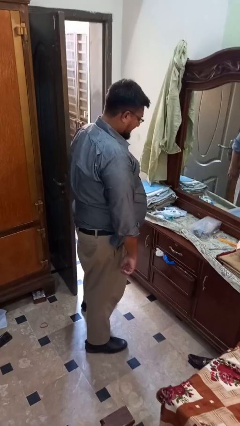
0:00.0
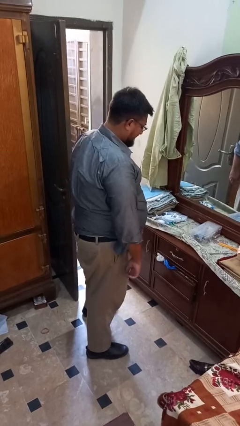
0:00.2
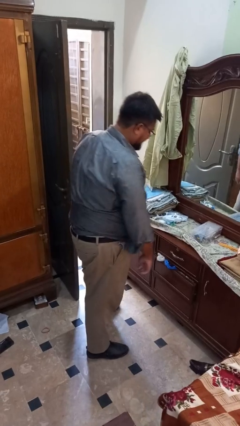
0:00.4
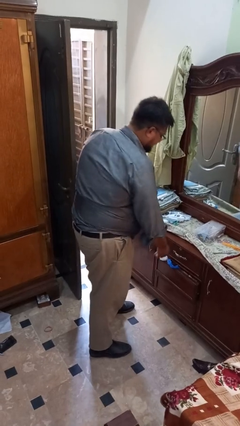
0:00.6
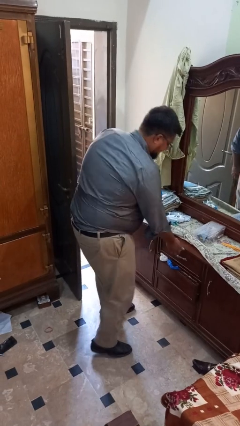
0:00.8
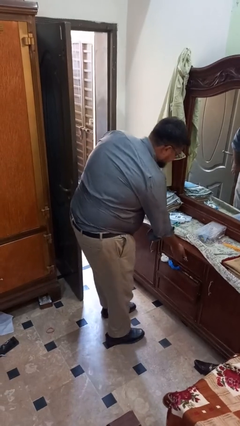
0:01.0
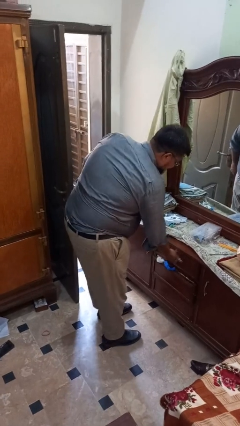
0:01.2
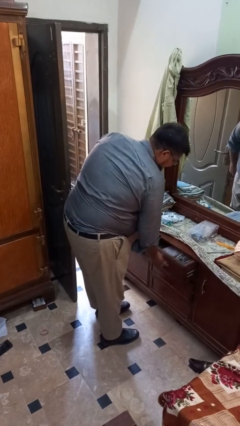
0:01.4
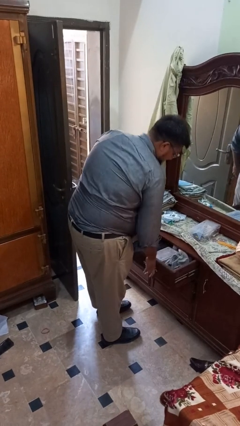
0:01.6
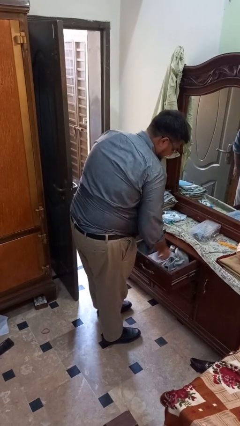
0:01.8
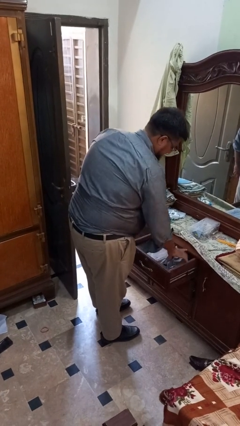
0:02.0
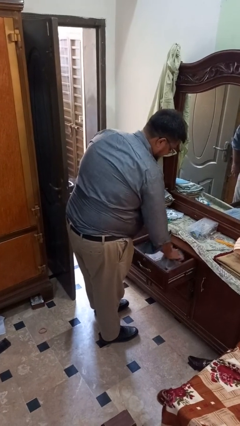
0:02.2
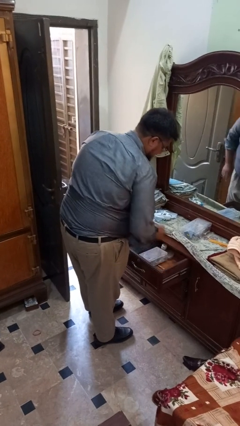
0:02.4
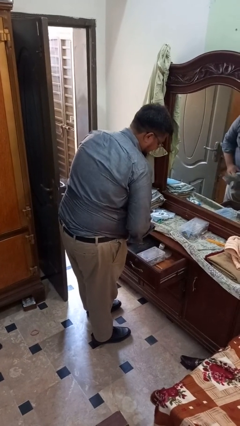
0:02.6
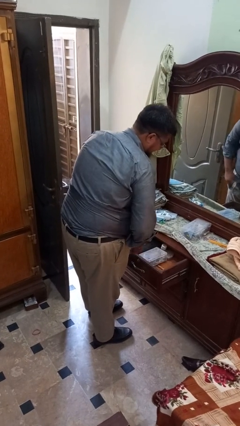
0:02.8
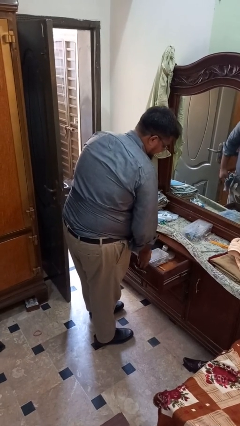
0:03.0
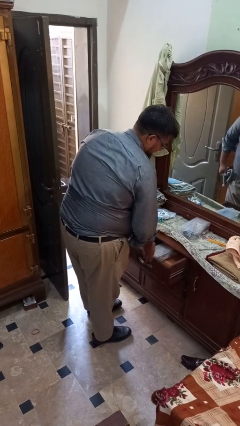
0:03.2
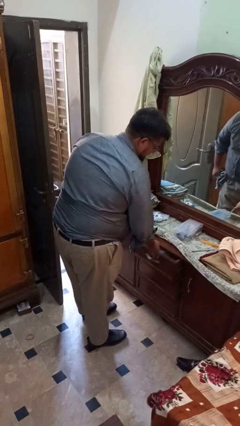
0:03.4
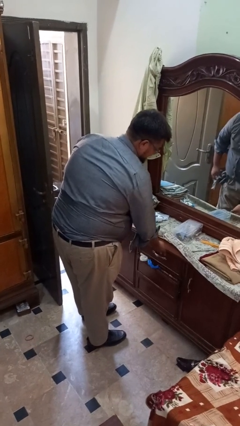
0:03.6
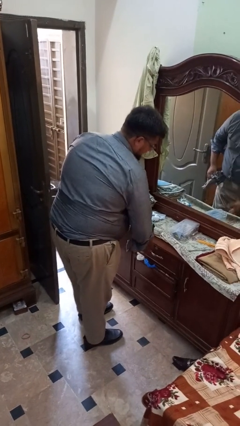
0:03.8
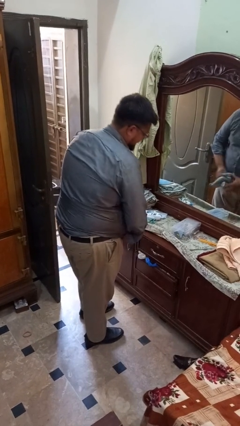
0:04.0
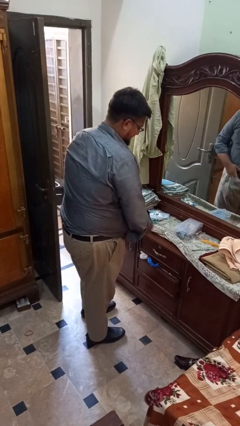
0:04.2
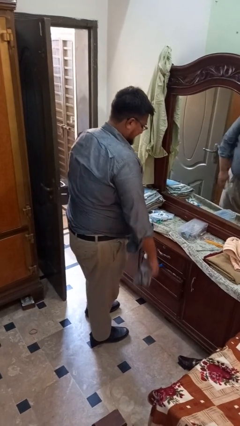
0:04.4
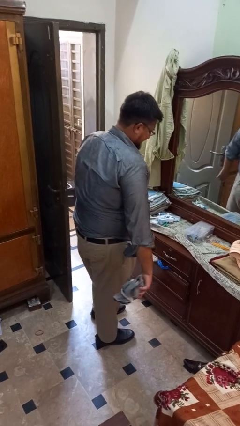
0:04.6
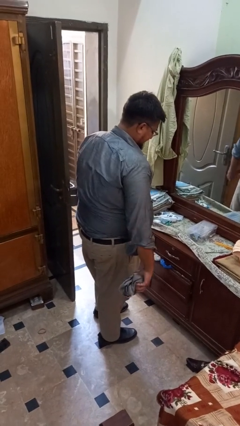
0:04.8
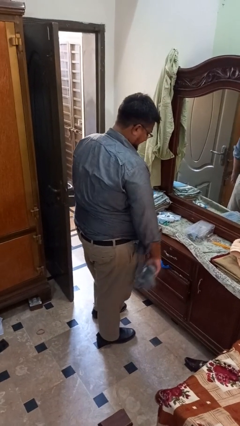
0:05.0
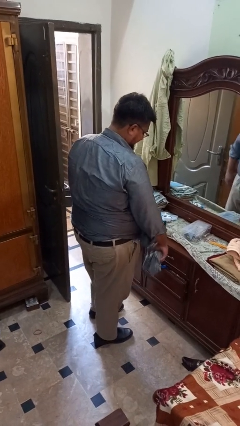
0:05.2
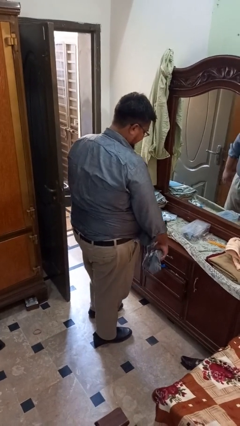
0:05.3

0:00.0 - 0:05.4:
person takes clothes from dresser

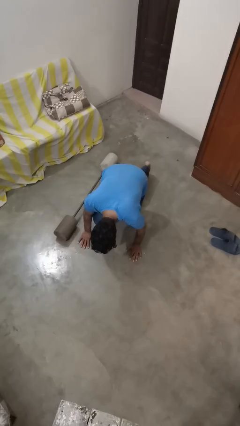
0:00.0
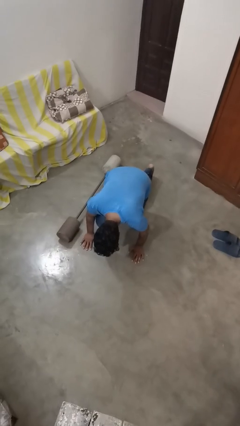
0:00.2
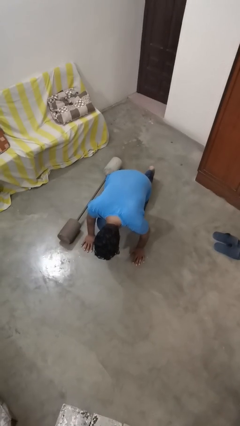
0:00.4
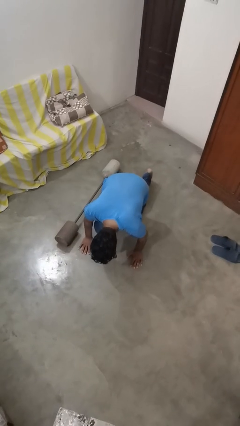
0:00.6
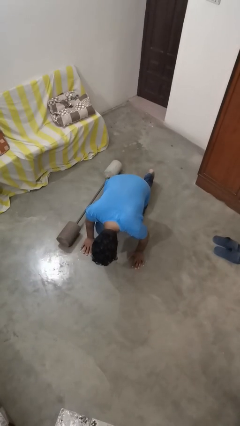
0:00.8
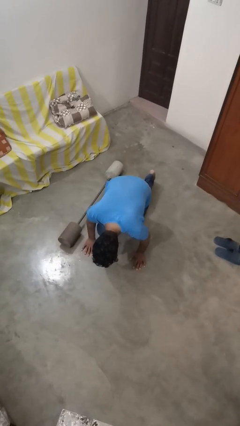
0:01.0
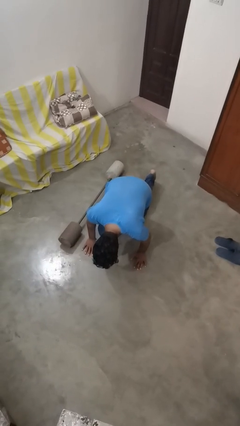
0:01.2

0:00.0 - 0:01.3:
person lies down on floor

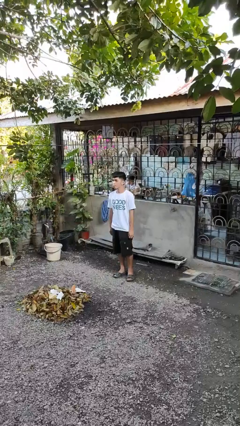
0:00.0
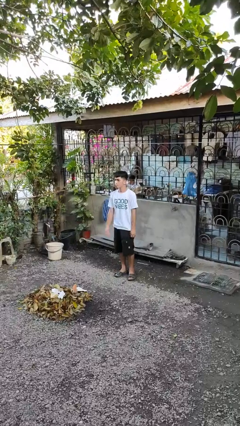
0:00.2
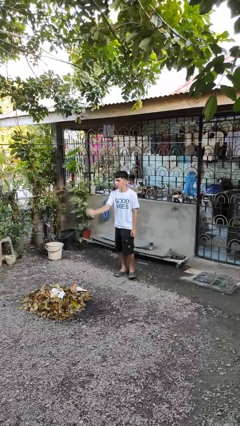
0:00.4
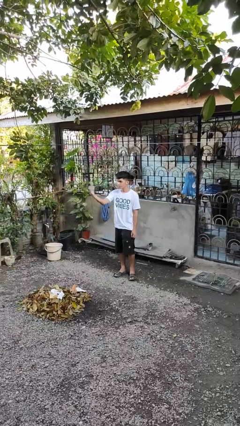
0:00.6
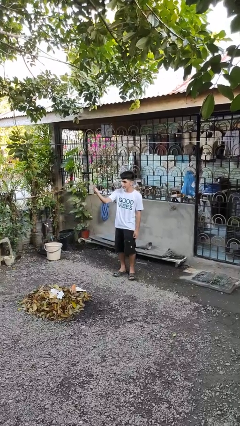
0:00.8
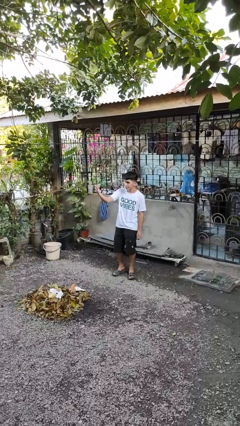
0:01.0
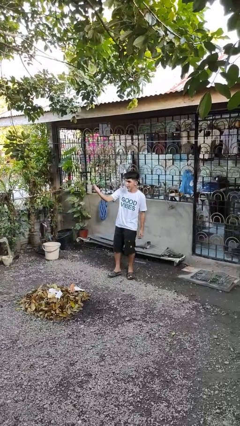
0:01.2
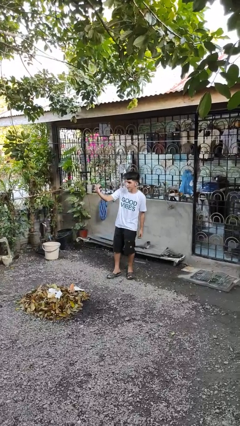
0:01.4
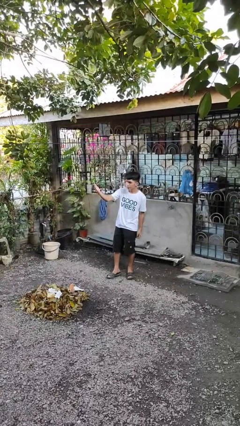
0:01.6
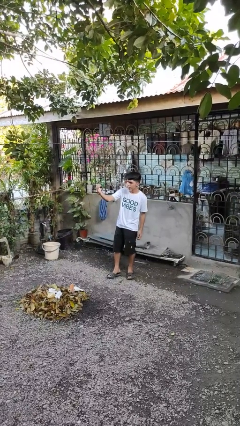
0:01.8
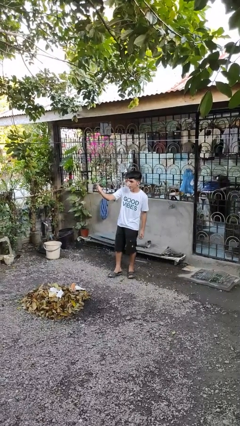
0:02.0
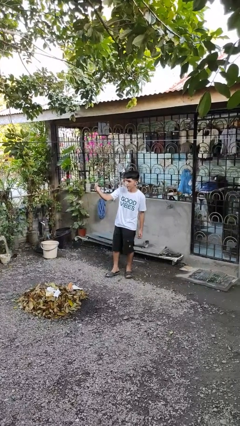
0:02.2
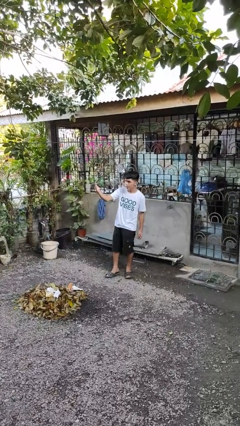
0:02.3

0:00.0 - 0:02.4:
person gestures come here

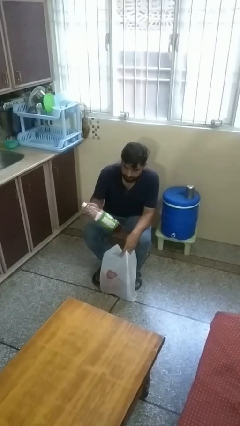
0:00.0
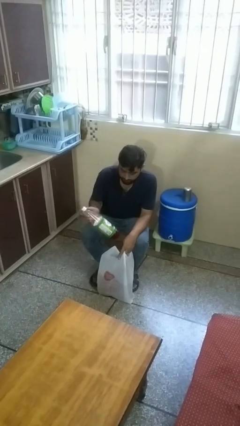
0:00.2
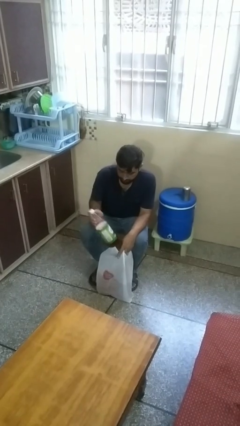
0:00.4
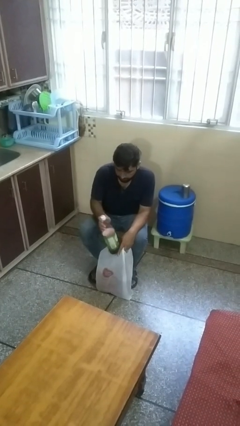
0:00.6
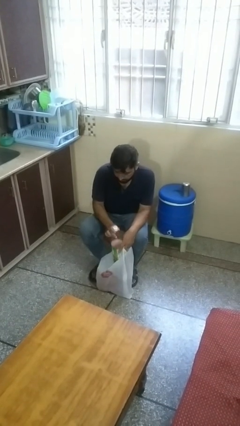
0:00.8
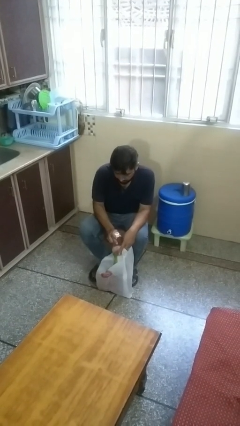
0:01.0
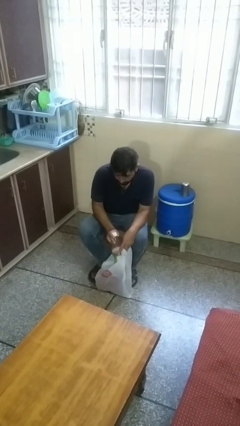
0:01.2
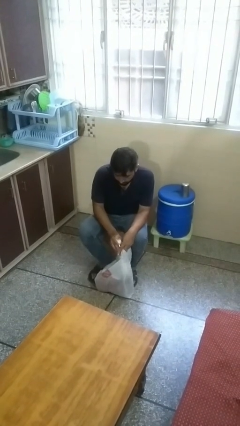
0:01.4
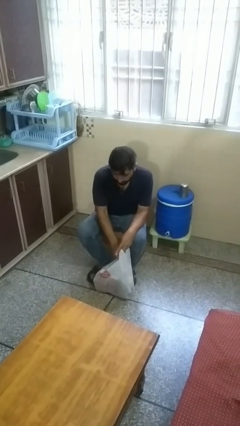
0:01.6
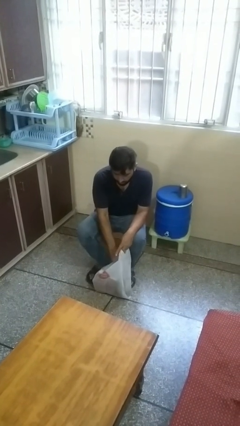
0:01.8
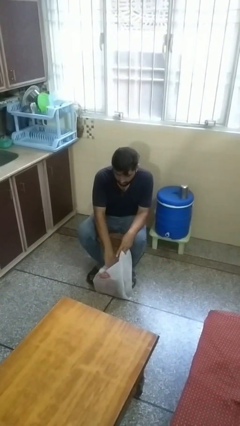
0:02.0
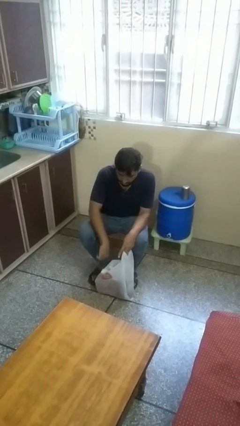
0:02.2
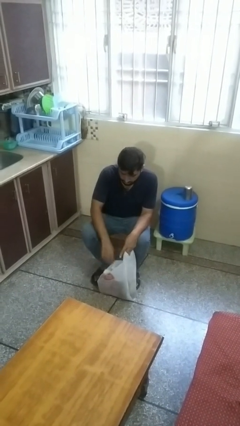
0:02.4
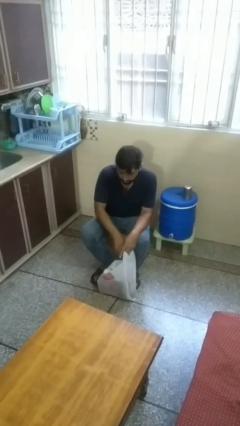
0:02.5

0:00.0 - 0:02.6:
person puts object into bag

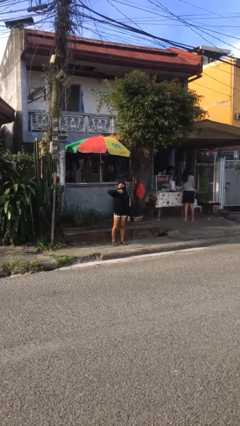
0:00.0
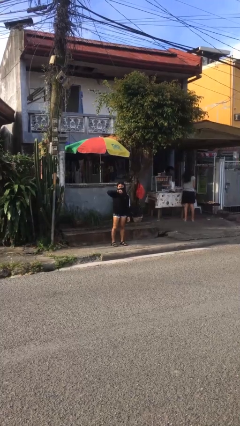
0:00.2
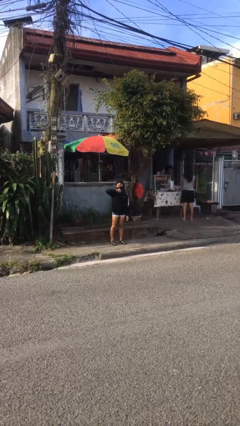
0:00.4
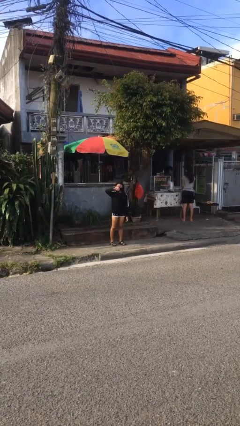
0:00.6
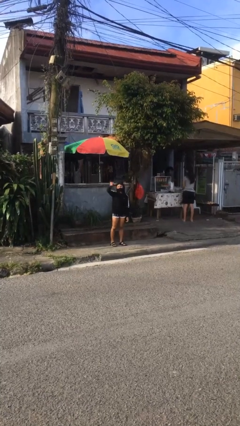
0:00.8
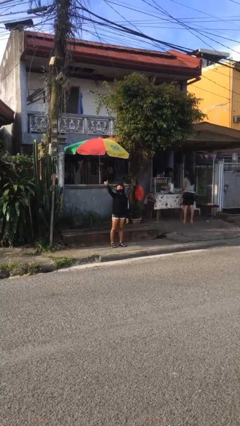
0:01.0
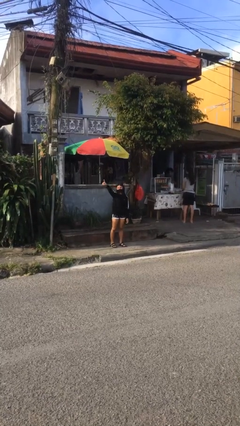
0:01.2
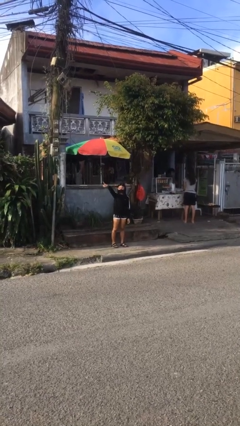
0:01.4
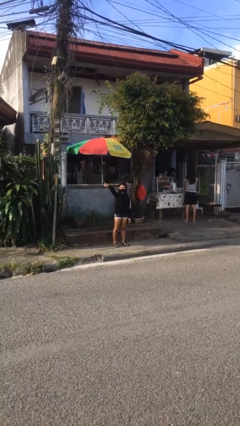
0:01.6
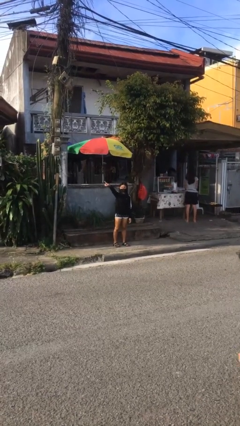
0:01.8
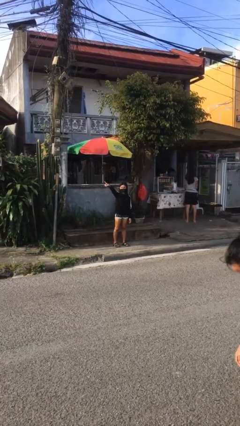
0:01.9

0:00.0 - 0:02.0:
person points at person

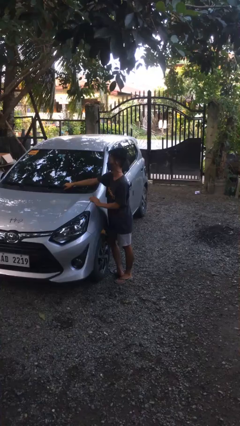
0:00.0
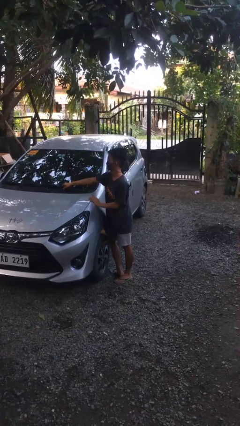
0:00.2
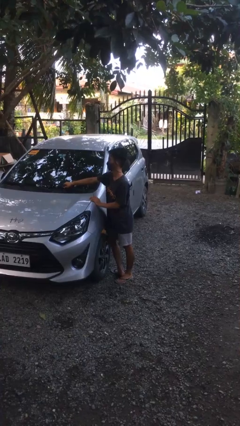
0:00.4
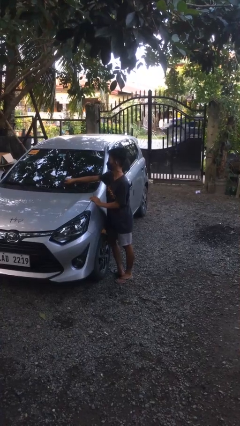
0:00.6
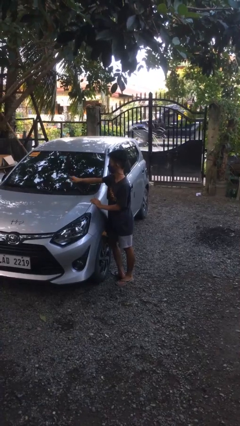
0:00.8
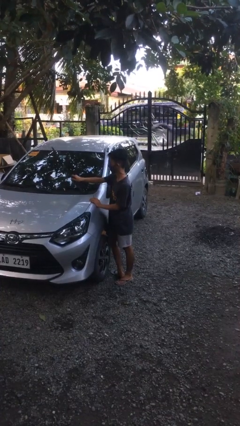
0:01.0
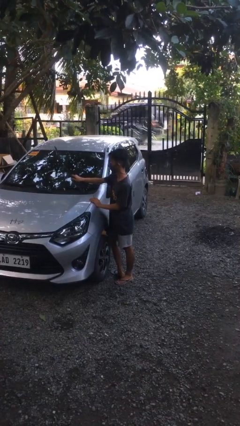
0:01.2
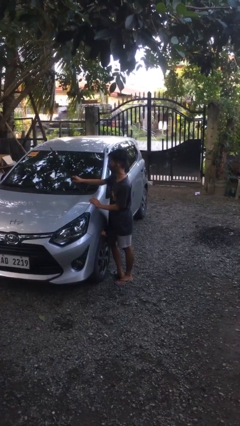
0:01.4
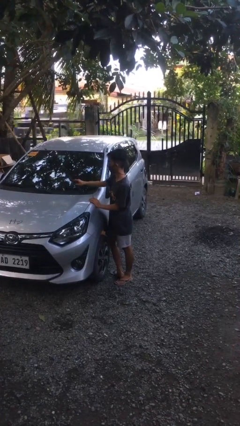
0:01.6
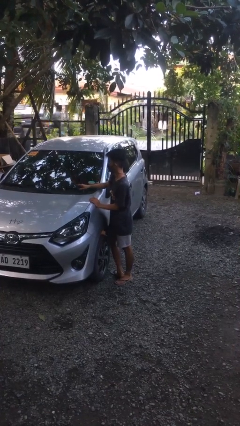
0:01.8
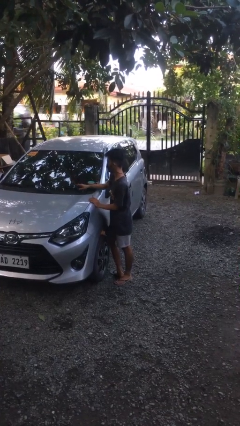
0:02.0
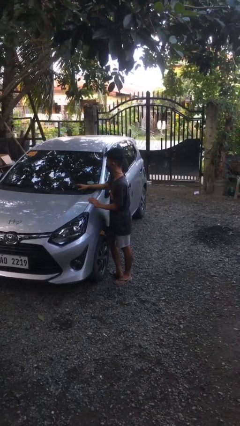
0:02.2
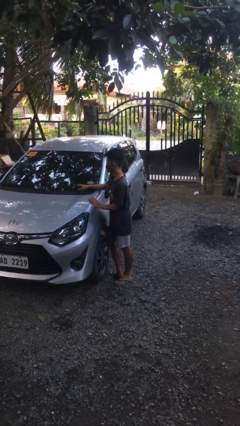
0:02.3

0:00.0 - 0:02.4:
person flips up car wipers

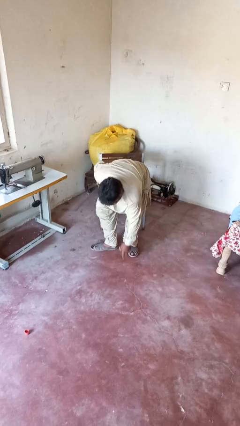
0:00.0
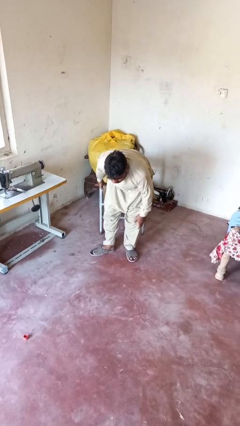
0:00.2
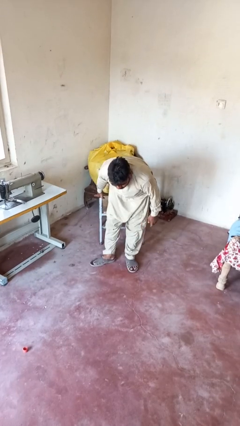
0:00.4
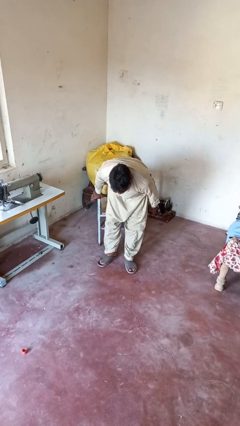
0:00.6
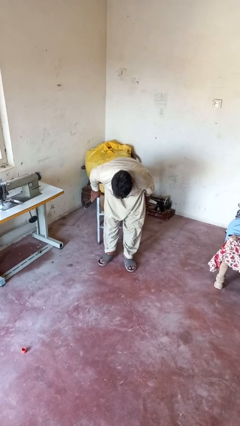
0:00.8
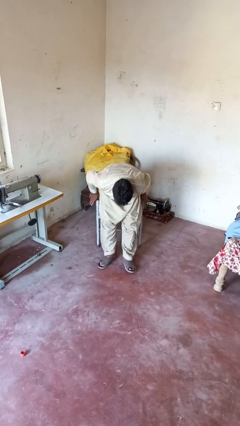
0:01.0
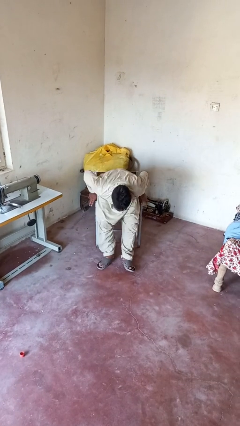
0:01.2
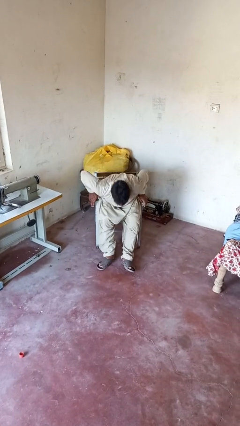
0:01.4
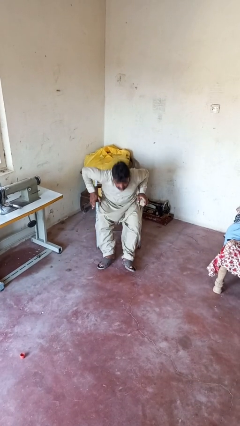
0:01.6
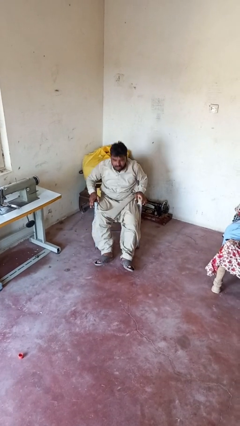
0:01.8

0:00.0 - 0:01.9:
person sits down
